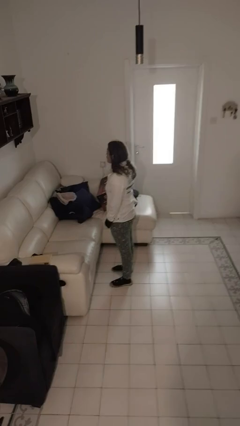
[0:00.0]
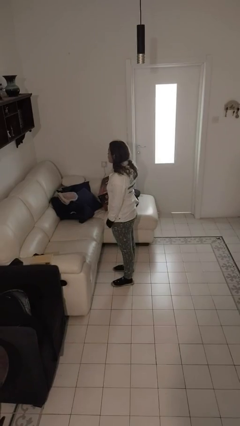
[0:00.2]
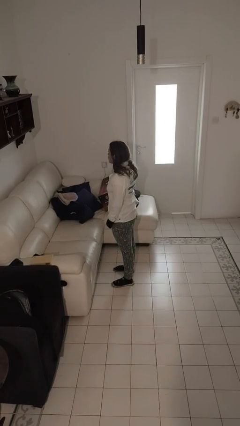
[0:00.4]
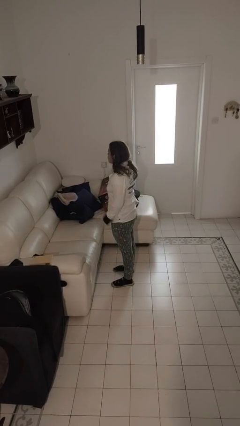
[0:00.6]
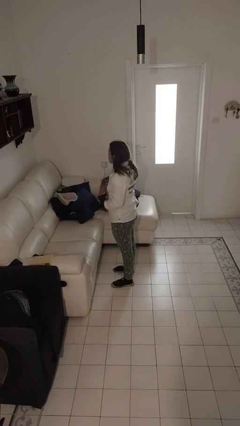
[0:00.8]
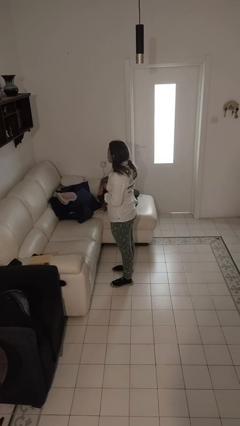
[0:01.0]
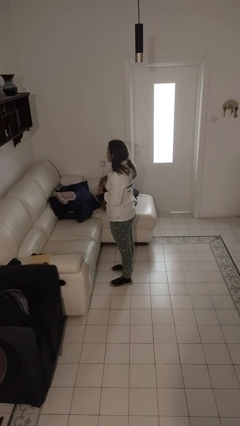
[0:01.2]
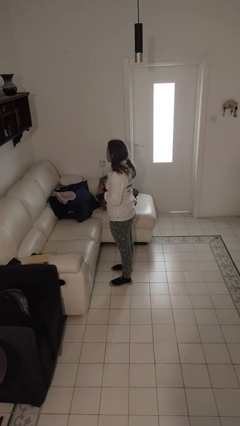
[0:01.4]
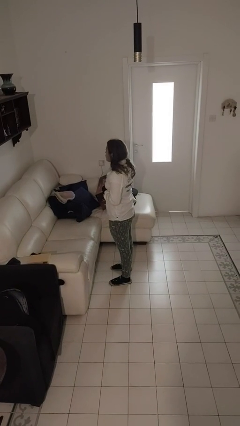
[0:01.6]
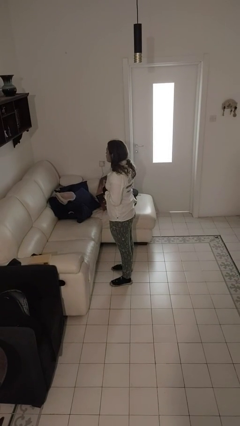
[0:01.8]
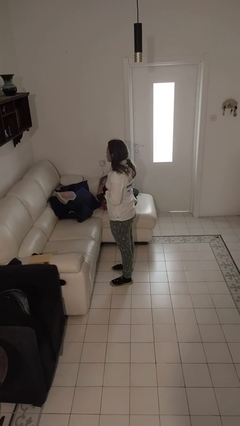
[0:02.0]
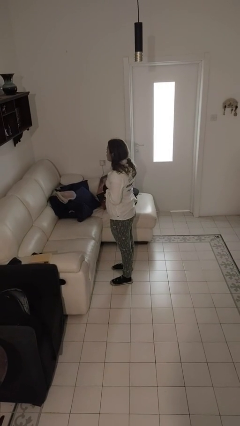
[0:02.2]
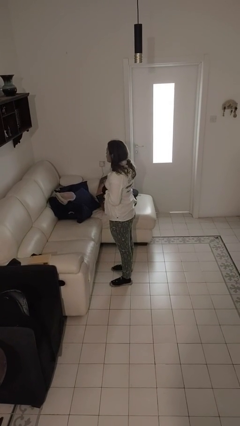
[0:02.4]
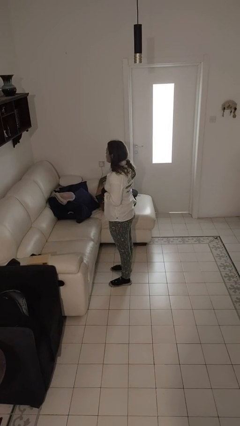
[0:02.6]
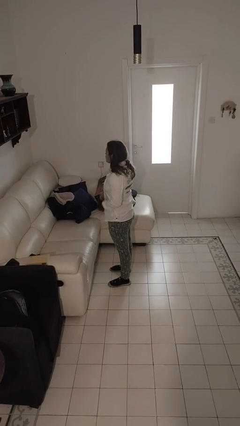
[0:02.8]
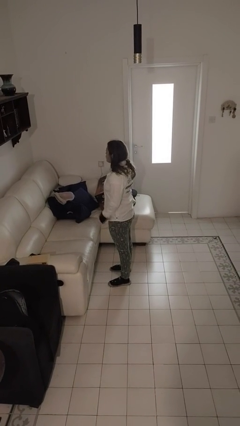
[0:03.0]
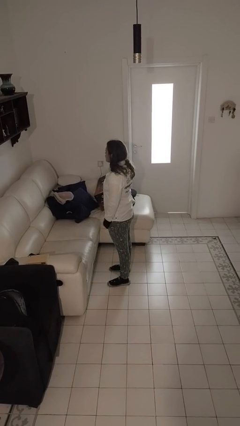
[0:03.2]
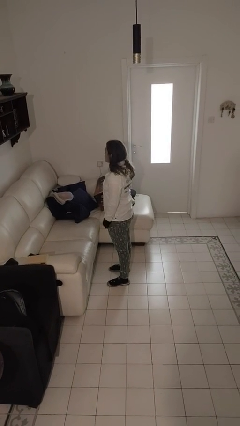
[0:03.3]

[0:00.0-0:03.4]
person unbuttons shirt

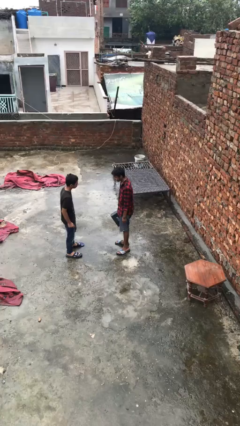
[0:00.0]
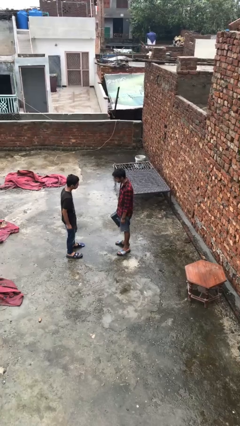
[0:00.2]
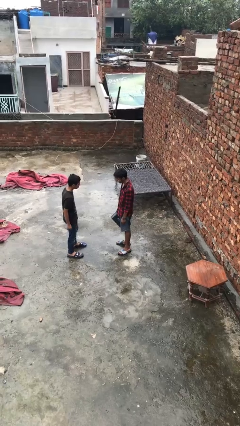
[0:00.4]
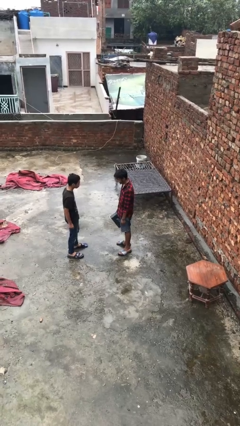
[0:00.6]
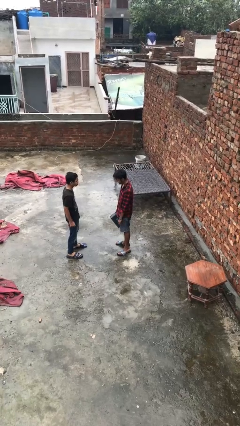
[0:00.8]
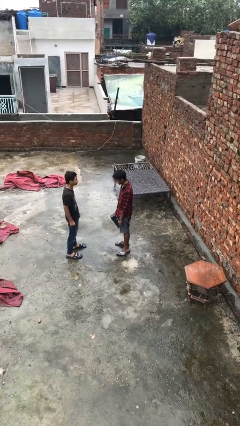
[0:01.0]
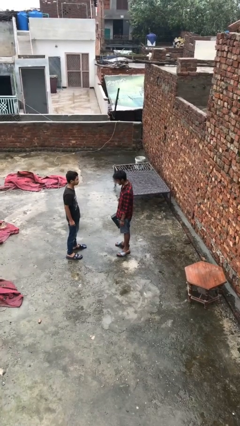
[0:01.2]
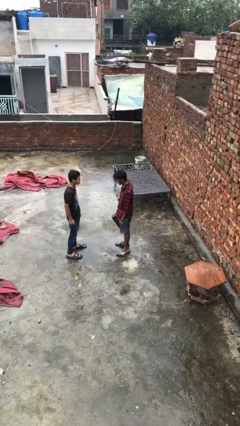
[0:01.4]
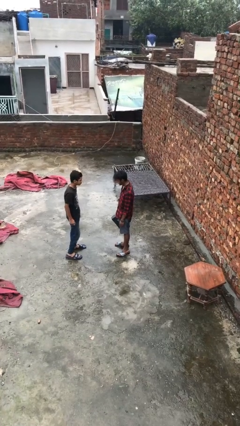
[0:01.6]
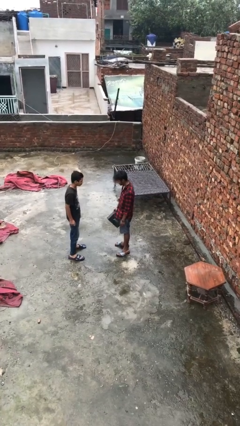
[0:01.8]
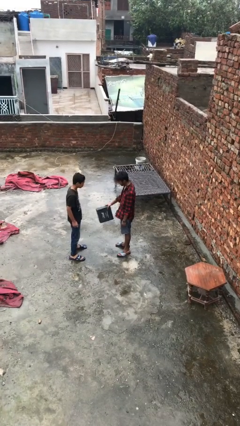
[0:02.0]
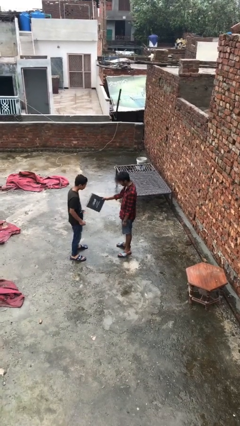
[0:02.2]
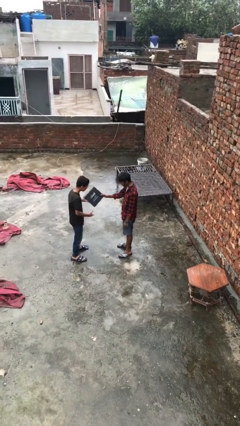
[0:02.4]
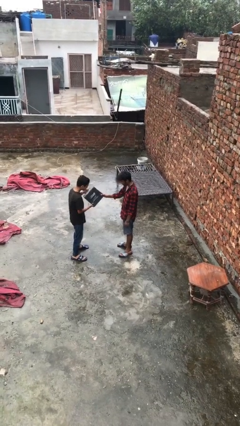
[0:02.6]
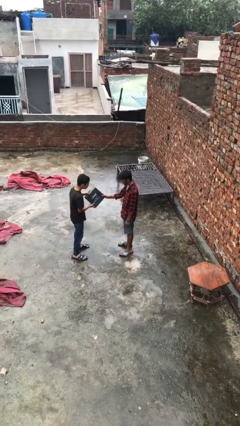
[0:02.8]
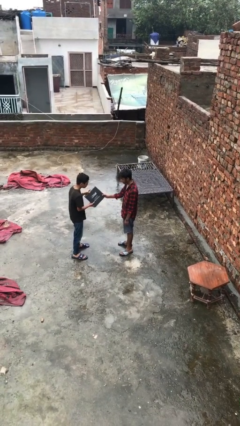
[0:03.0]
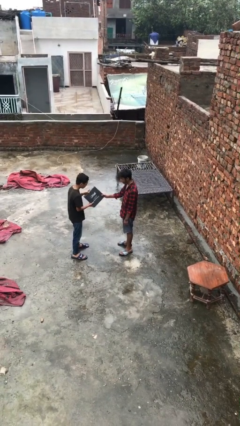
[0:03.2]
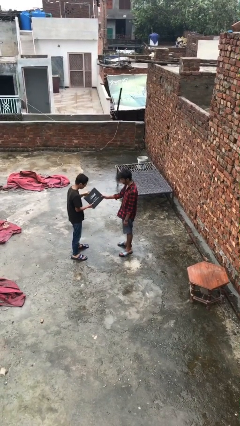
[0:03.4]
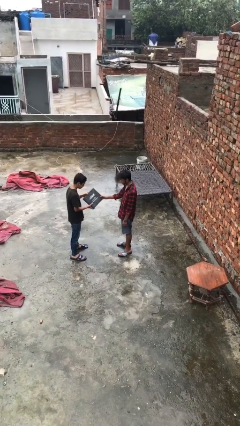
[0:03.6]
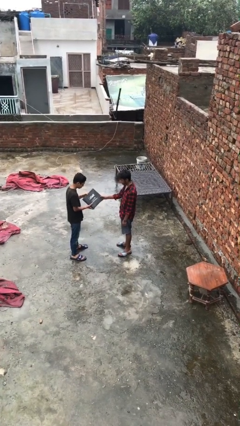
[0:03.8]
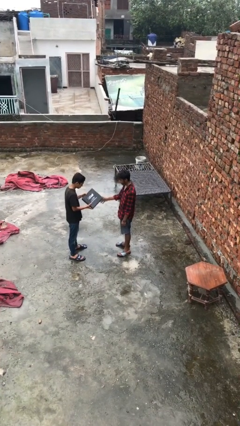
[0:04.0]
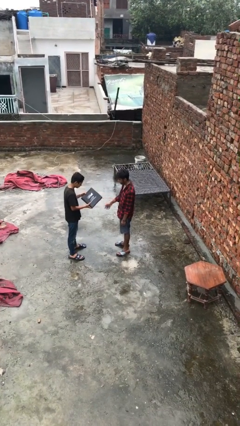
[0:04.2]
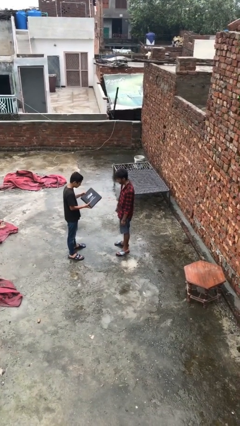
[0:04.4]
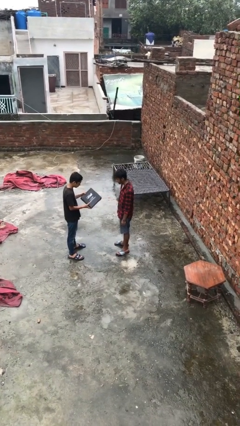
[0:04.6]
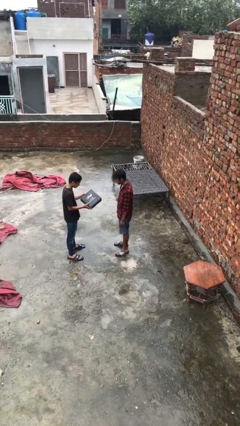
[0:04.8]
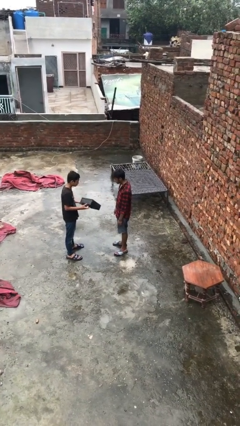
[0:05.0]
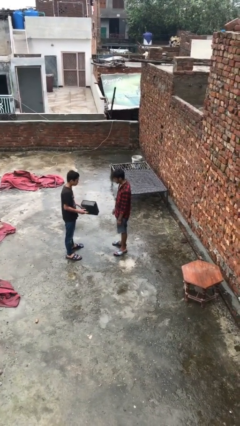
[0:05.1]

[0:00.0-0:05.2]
person transfers object to person

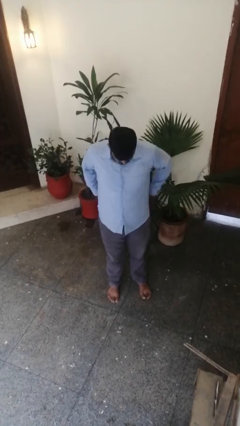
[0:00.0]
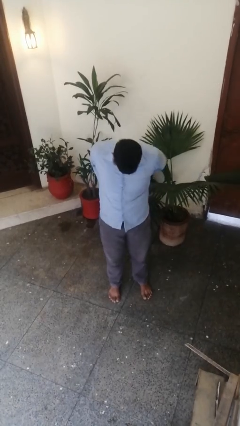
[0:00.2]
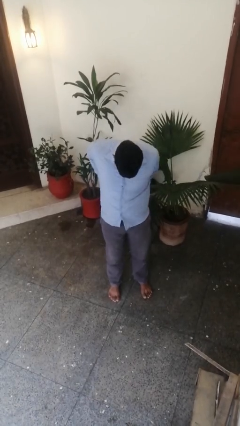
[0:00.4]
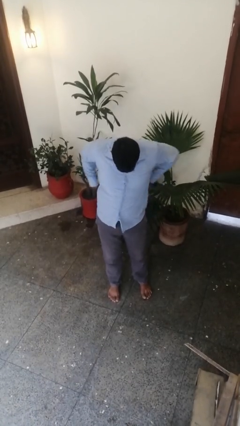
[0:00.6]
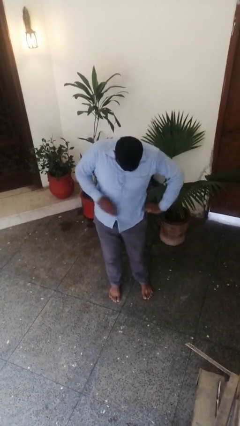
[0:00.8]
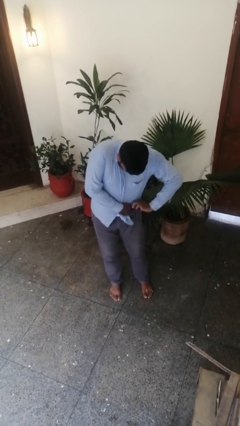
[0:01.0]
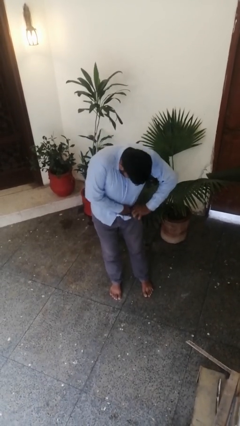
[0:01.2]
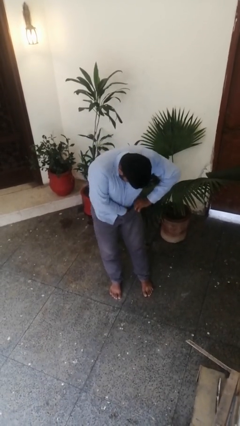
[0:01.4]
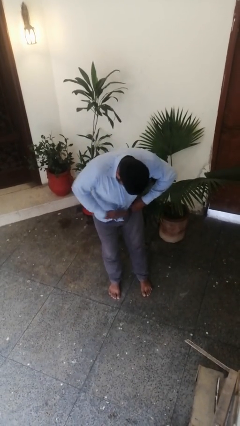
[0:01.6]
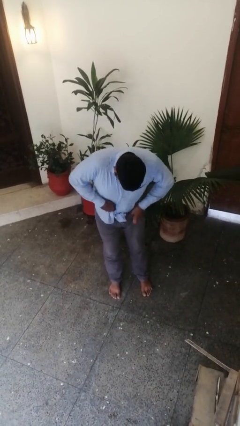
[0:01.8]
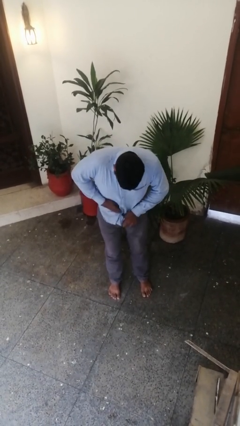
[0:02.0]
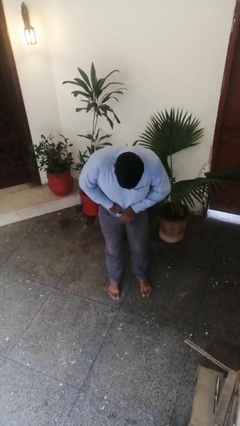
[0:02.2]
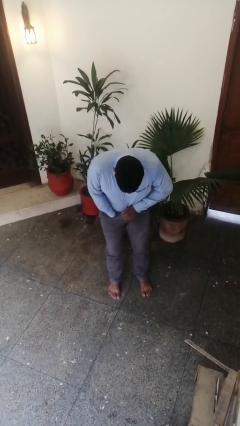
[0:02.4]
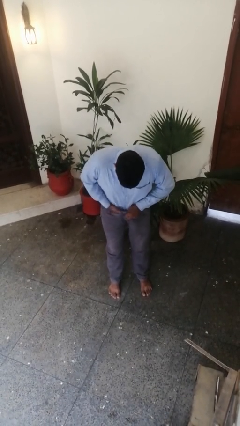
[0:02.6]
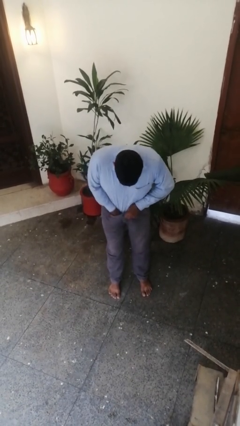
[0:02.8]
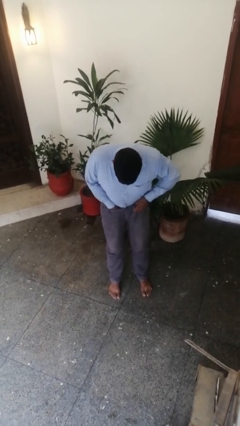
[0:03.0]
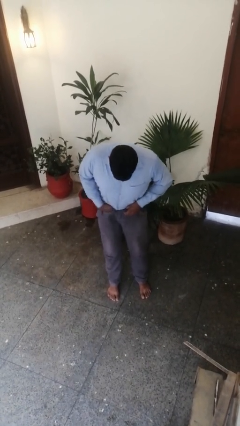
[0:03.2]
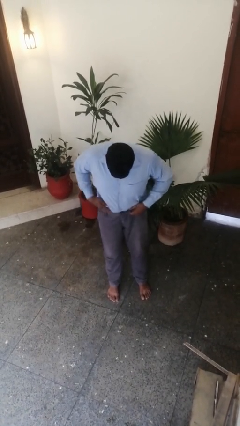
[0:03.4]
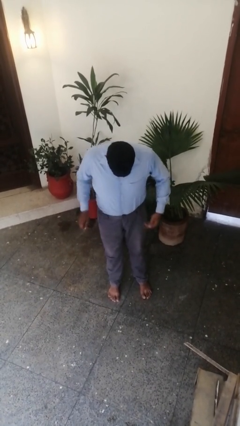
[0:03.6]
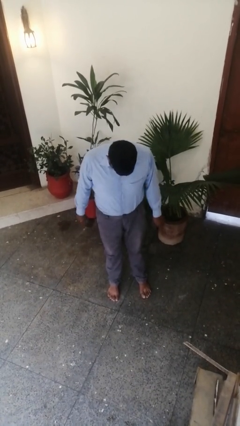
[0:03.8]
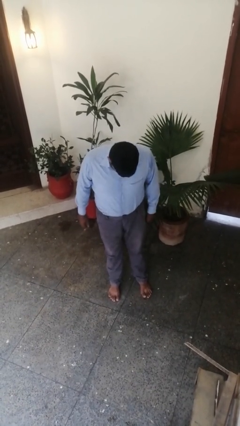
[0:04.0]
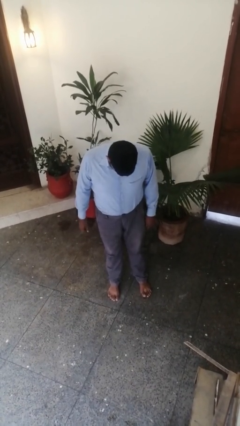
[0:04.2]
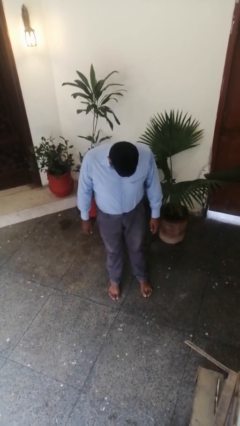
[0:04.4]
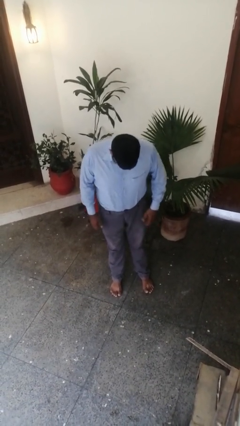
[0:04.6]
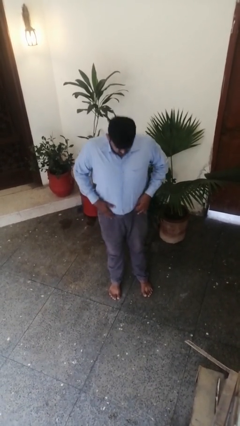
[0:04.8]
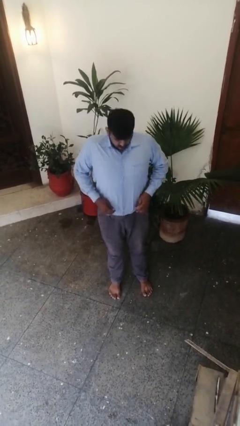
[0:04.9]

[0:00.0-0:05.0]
person tucks in shirt

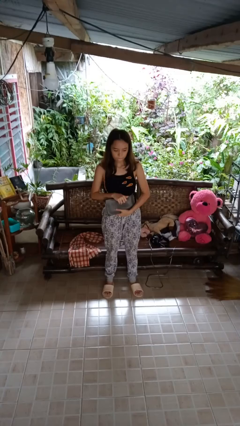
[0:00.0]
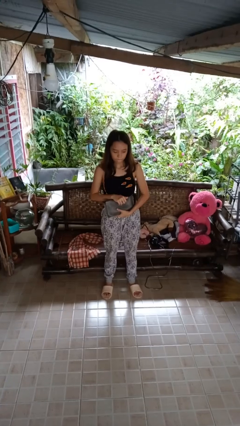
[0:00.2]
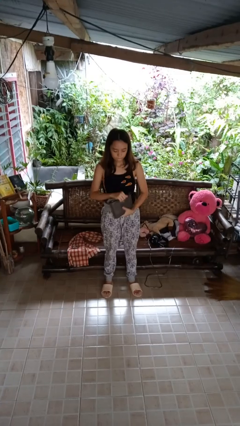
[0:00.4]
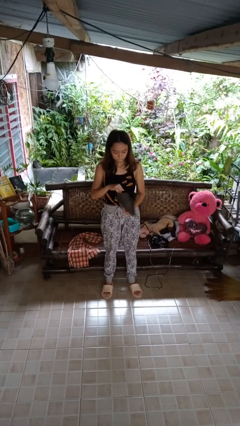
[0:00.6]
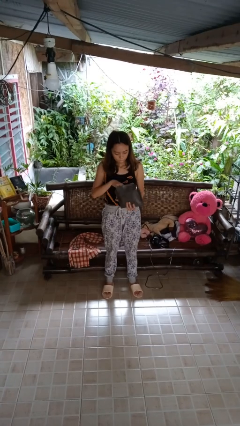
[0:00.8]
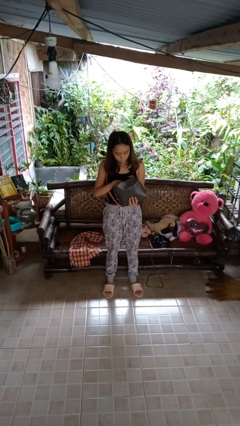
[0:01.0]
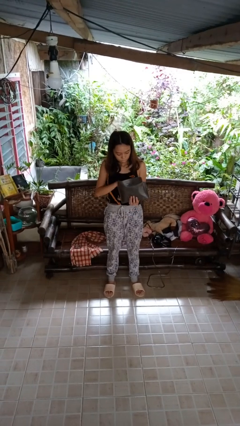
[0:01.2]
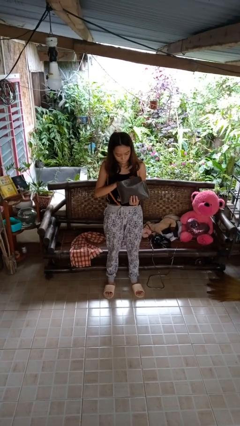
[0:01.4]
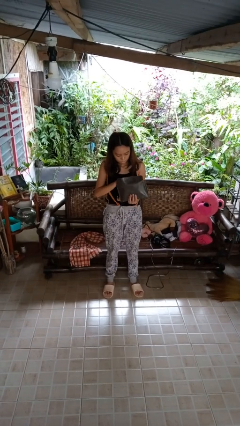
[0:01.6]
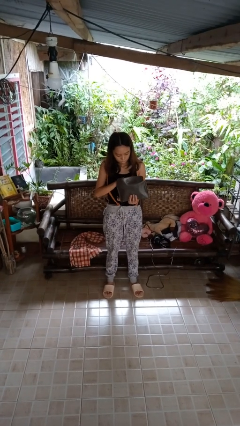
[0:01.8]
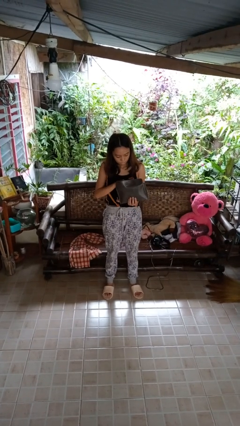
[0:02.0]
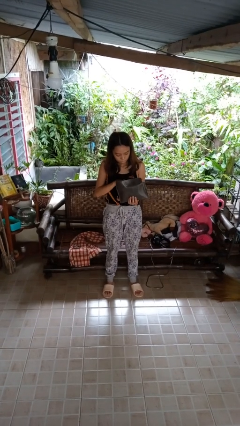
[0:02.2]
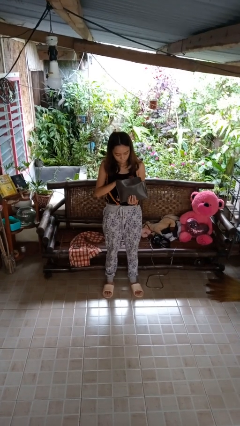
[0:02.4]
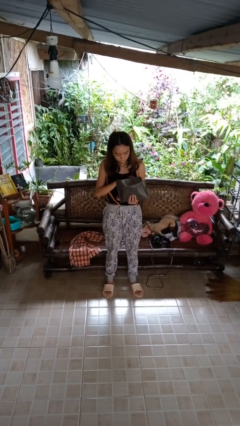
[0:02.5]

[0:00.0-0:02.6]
person searches in purse

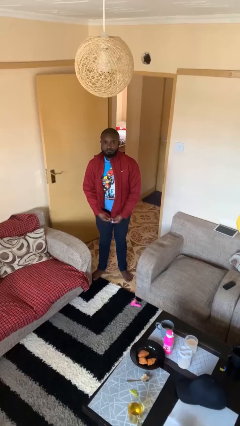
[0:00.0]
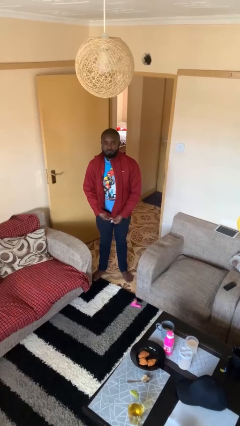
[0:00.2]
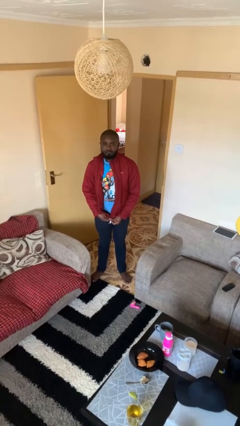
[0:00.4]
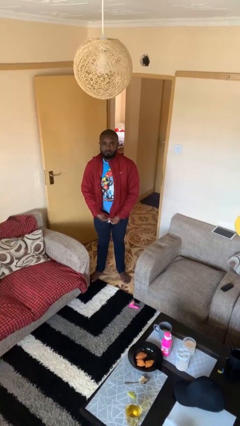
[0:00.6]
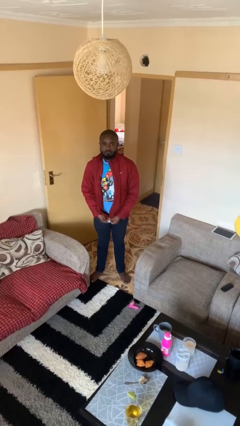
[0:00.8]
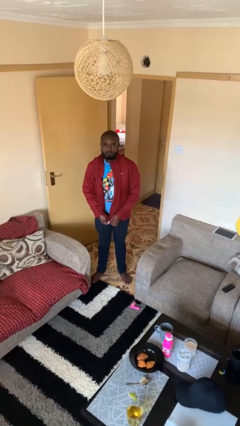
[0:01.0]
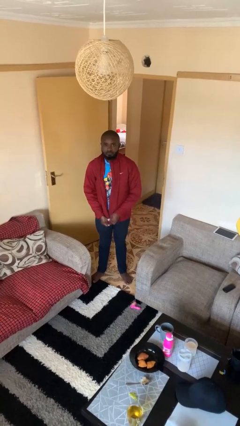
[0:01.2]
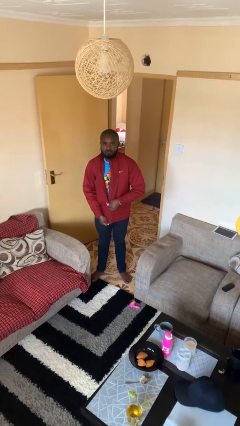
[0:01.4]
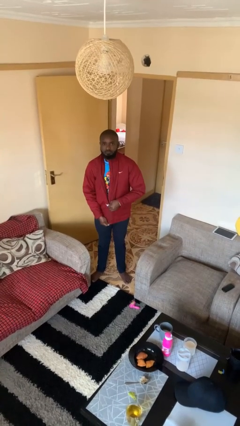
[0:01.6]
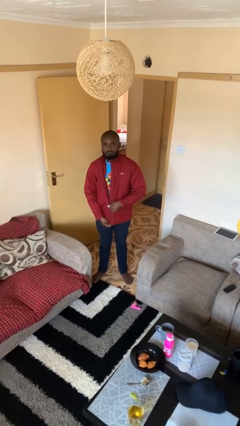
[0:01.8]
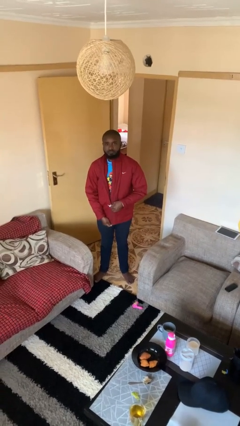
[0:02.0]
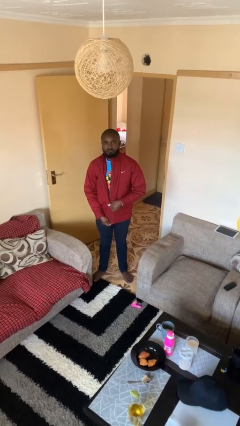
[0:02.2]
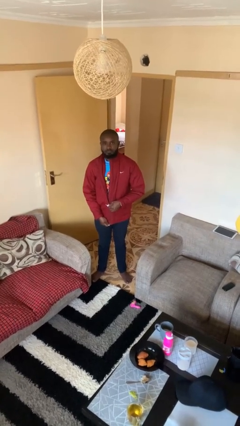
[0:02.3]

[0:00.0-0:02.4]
person zips up jacket
